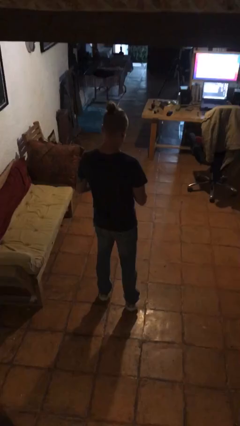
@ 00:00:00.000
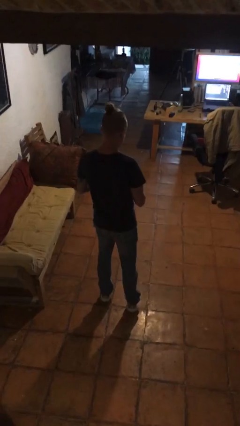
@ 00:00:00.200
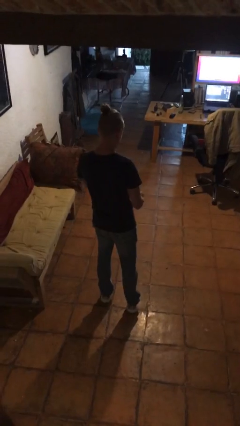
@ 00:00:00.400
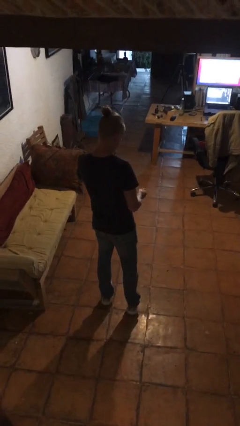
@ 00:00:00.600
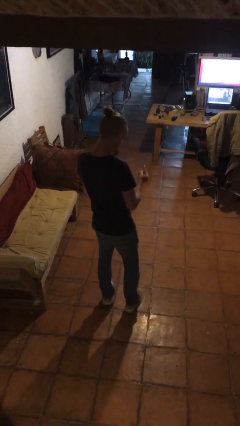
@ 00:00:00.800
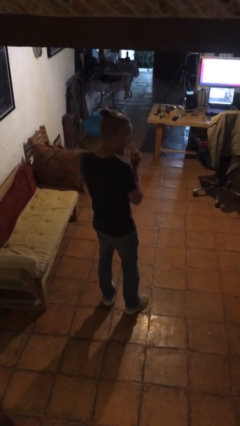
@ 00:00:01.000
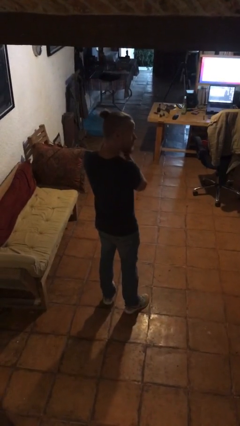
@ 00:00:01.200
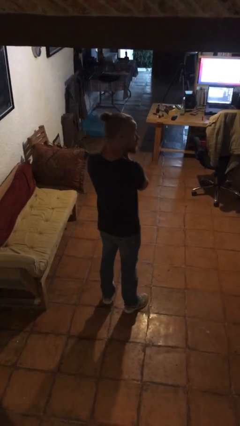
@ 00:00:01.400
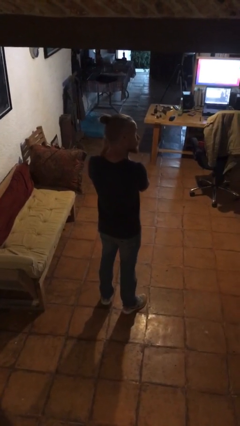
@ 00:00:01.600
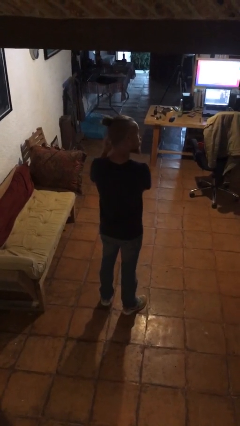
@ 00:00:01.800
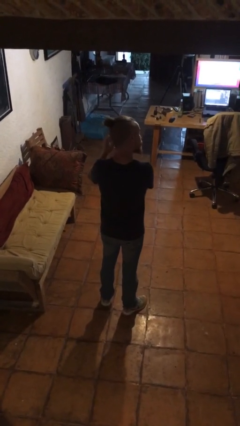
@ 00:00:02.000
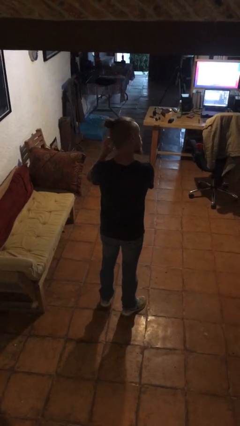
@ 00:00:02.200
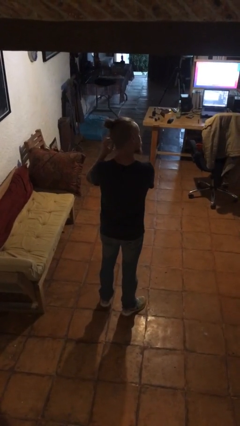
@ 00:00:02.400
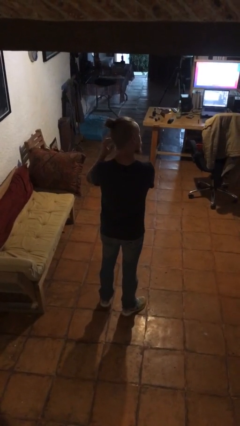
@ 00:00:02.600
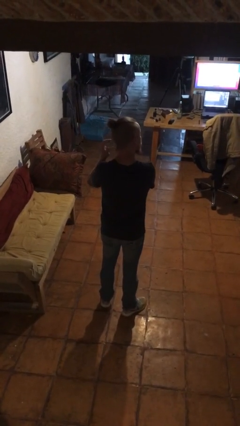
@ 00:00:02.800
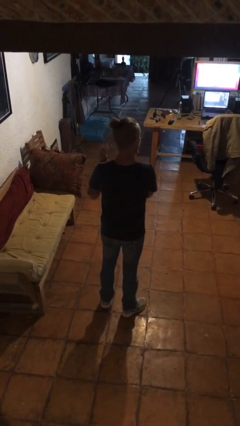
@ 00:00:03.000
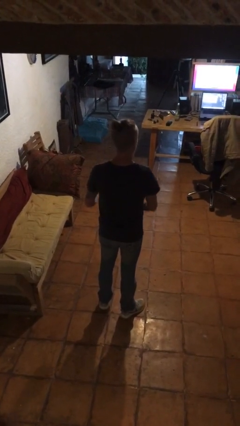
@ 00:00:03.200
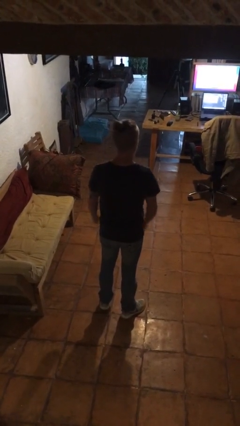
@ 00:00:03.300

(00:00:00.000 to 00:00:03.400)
person puts on earrings

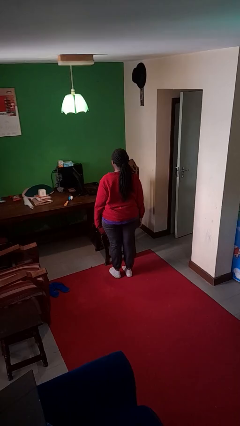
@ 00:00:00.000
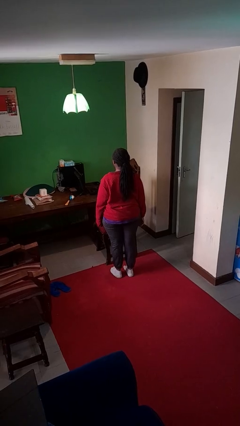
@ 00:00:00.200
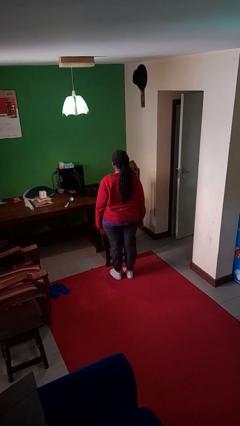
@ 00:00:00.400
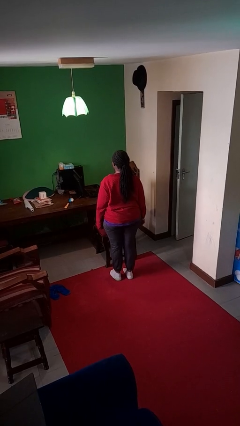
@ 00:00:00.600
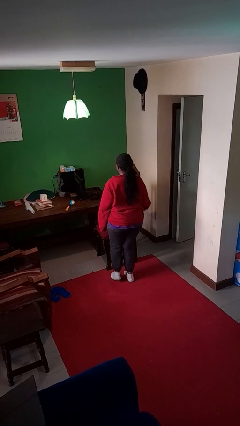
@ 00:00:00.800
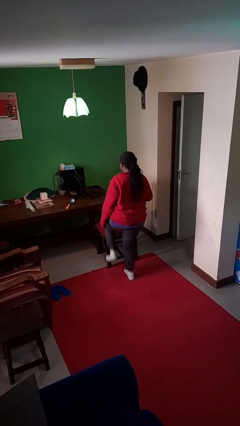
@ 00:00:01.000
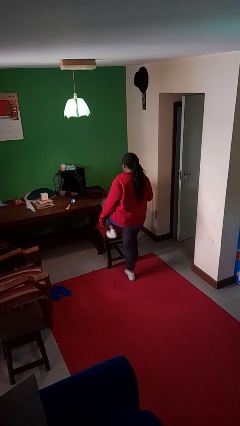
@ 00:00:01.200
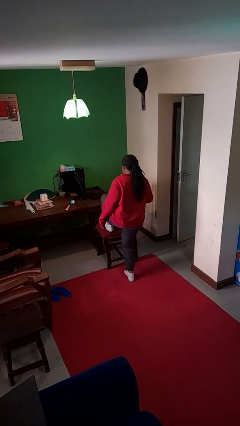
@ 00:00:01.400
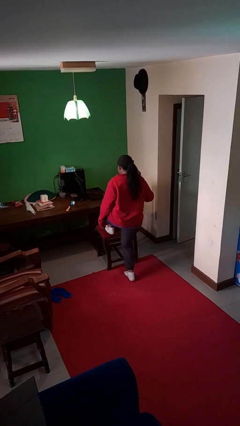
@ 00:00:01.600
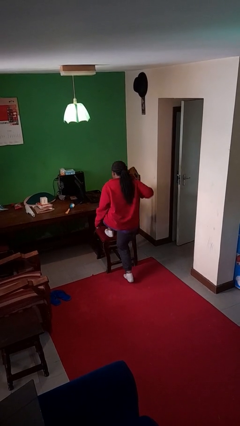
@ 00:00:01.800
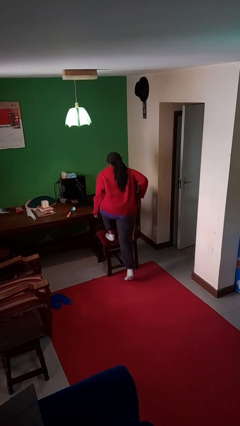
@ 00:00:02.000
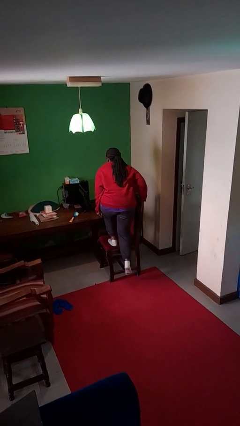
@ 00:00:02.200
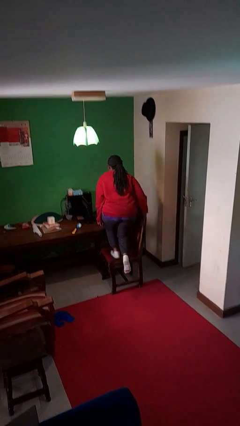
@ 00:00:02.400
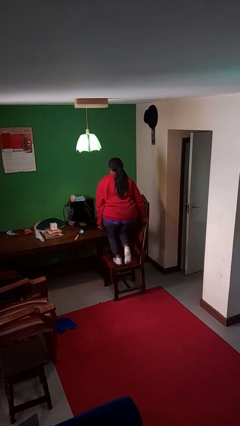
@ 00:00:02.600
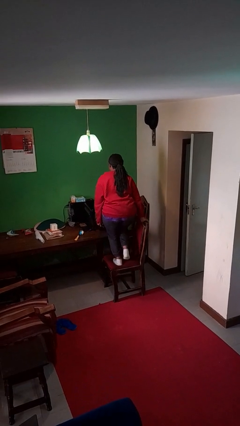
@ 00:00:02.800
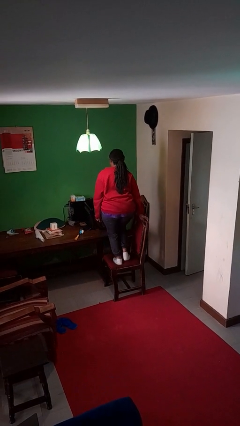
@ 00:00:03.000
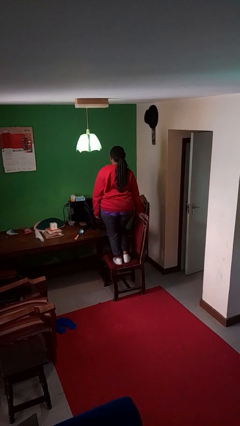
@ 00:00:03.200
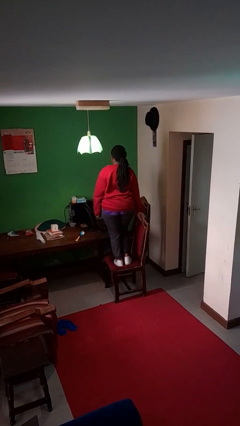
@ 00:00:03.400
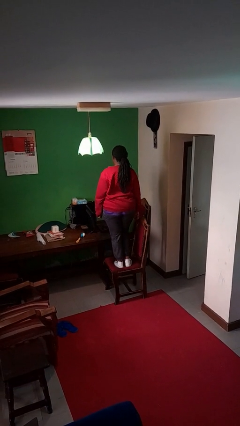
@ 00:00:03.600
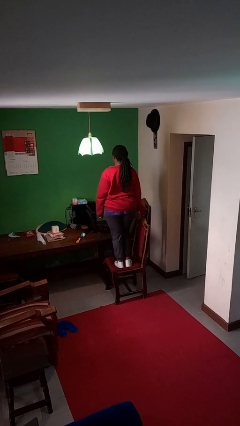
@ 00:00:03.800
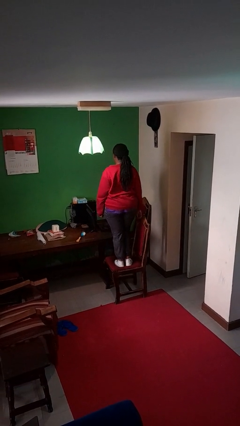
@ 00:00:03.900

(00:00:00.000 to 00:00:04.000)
person climbs on chair

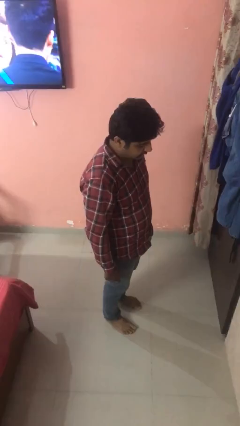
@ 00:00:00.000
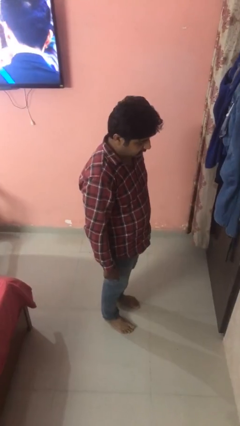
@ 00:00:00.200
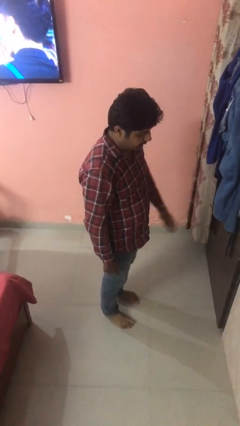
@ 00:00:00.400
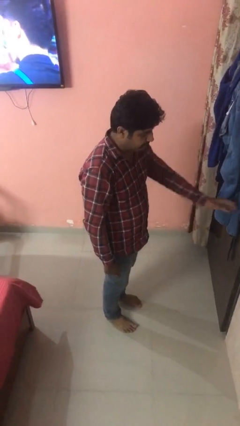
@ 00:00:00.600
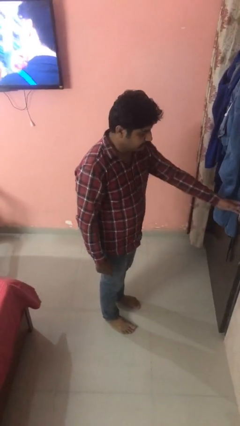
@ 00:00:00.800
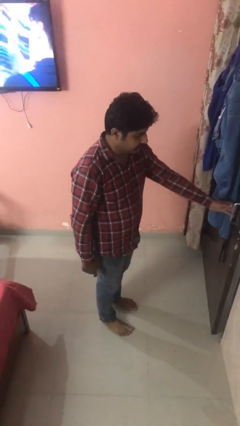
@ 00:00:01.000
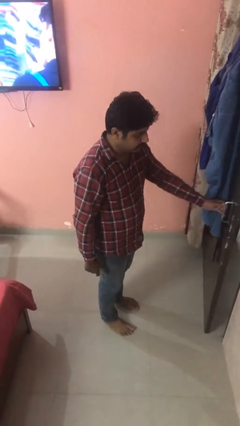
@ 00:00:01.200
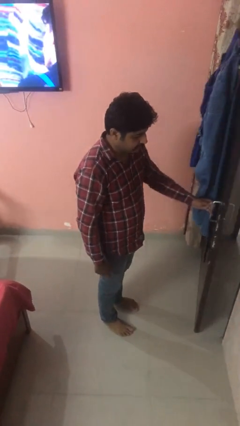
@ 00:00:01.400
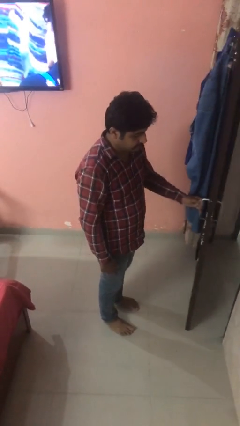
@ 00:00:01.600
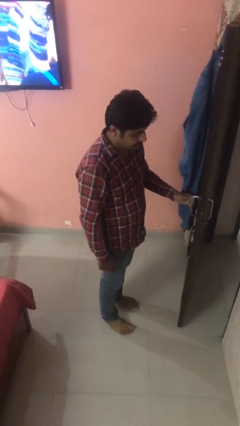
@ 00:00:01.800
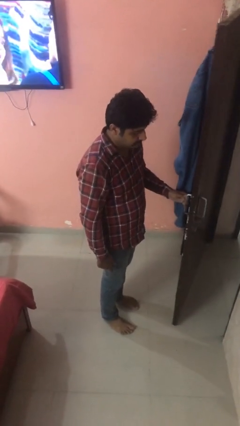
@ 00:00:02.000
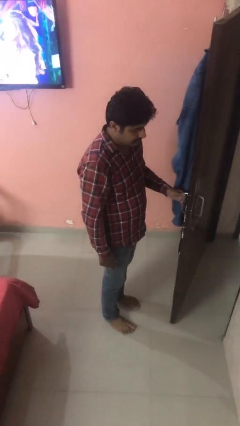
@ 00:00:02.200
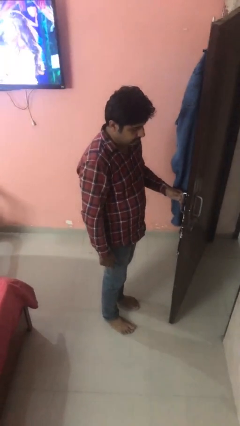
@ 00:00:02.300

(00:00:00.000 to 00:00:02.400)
person opens facility door

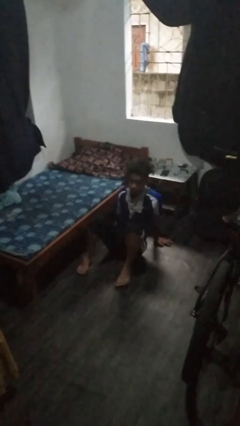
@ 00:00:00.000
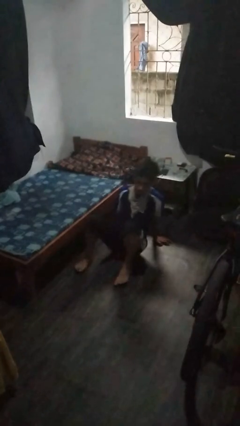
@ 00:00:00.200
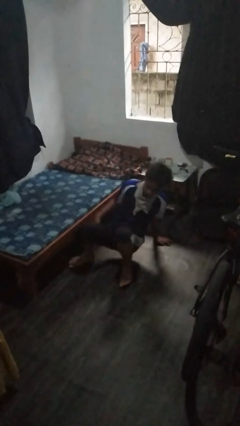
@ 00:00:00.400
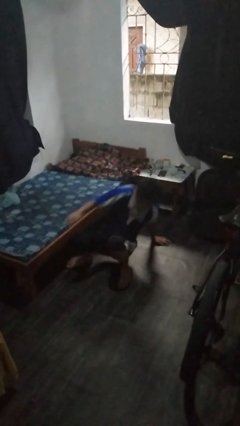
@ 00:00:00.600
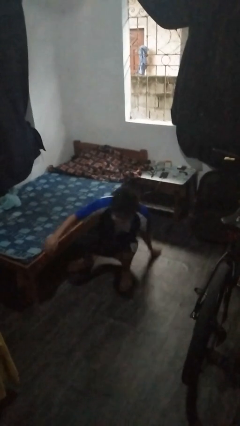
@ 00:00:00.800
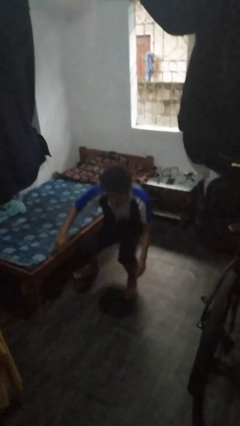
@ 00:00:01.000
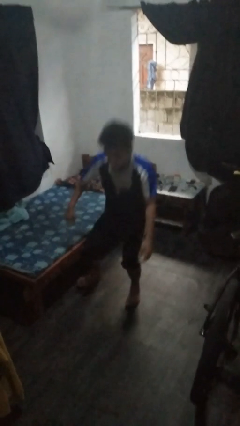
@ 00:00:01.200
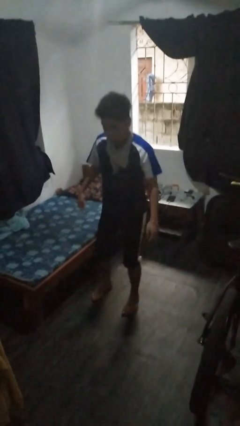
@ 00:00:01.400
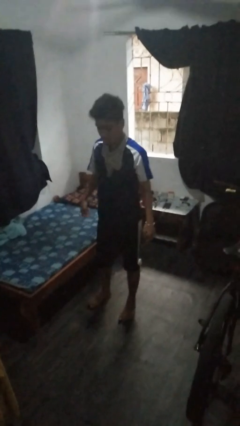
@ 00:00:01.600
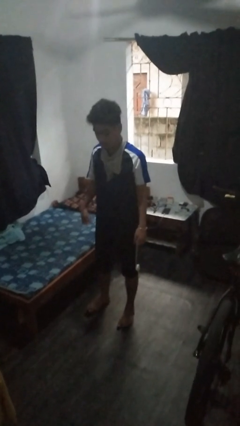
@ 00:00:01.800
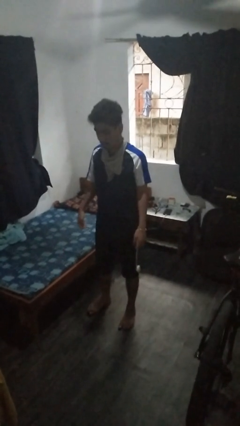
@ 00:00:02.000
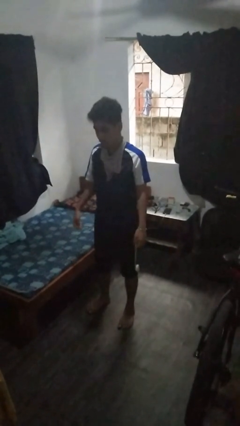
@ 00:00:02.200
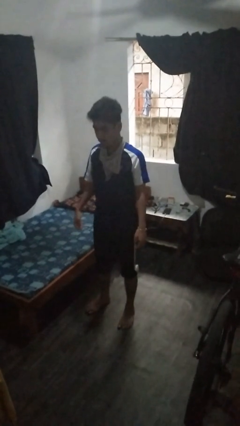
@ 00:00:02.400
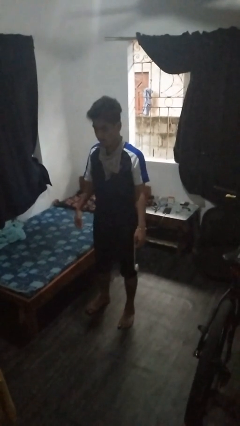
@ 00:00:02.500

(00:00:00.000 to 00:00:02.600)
person stands up from floor

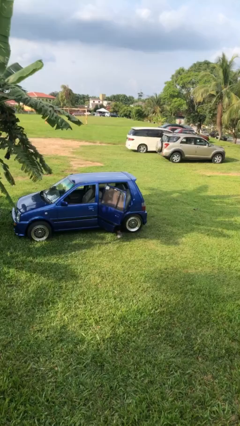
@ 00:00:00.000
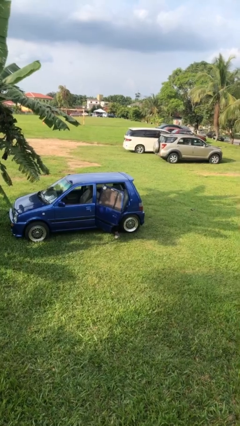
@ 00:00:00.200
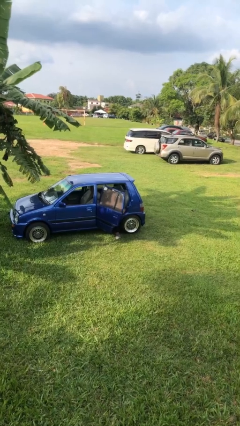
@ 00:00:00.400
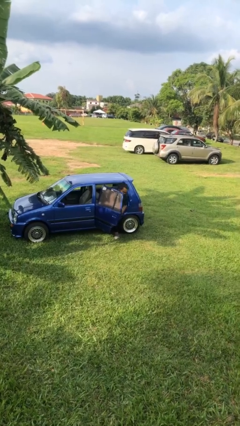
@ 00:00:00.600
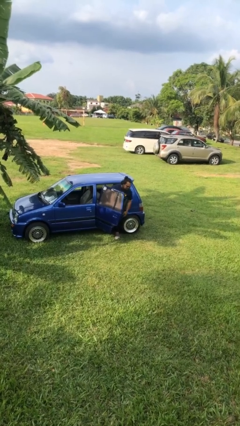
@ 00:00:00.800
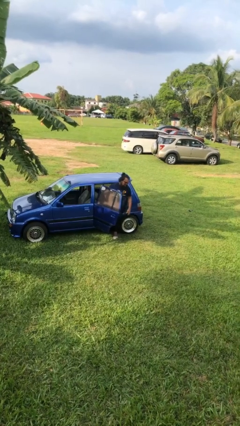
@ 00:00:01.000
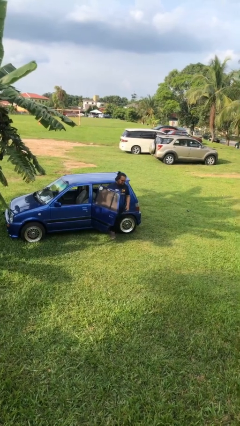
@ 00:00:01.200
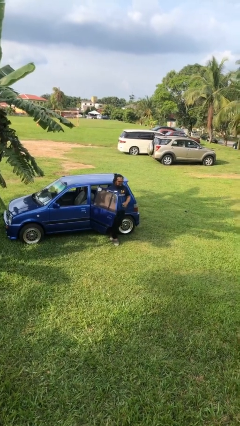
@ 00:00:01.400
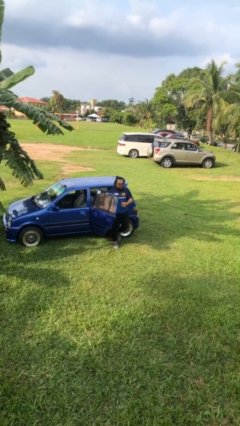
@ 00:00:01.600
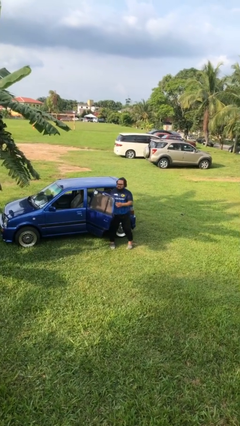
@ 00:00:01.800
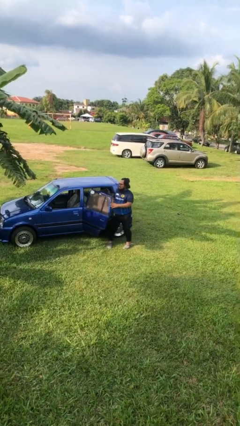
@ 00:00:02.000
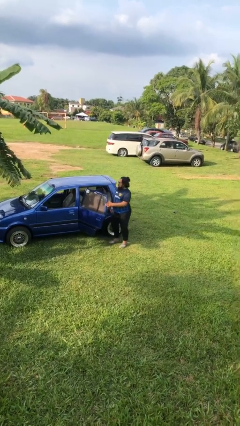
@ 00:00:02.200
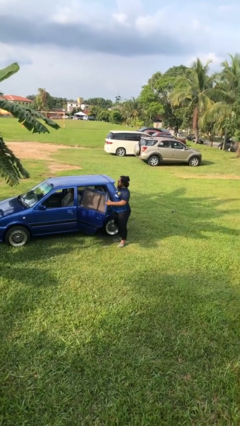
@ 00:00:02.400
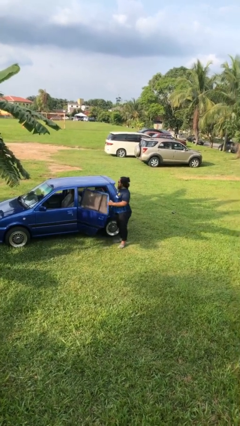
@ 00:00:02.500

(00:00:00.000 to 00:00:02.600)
person exits car

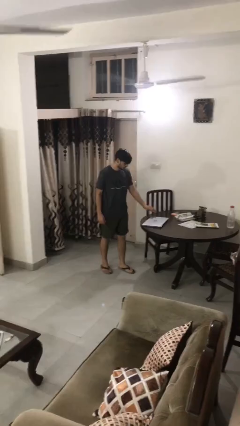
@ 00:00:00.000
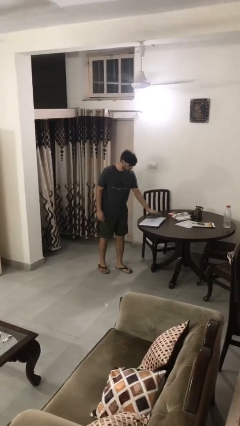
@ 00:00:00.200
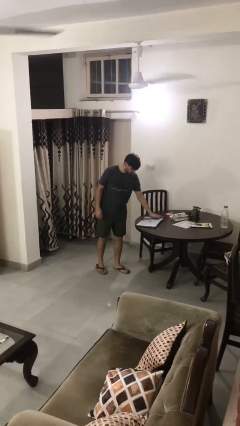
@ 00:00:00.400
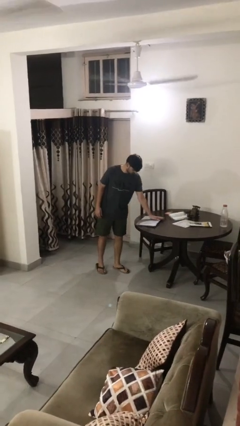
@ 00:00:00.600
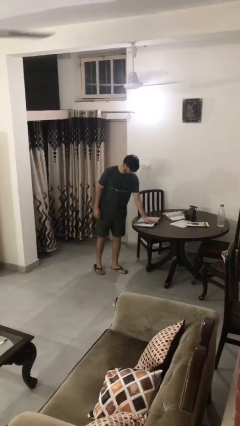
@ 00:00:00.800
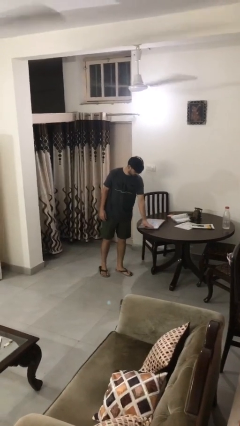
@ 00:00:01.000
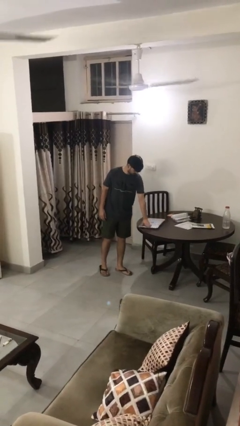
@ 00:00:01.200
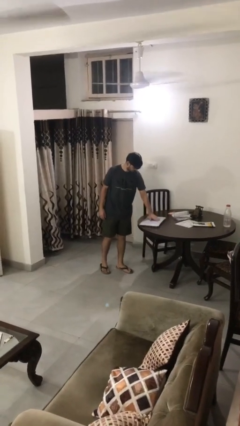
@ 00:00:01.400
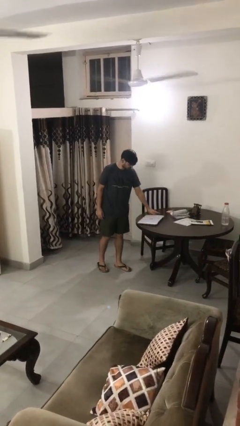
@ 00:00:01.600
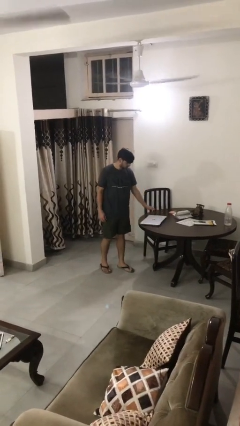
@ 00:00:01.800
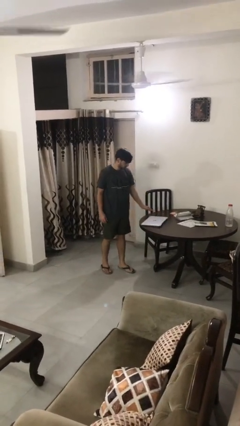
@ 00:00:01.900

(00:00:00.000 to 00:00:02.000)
person waves hand over object
